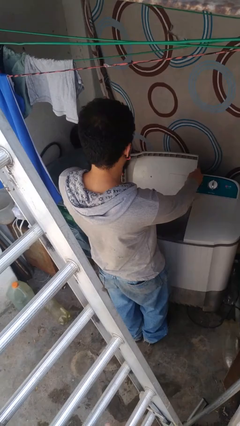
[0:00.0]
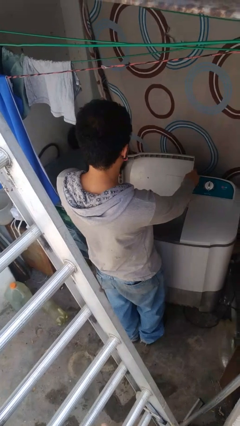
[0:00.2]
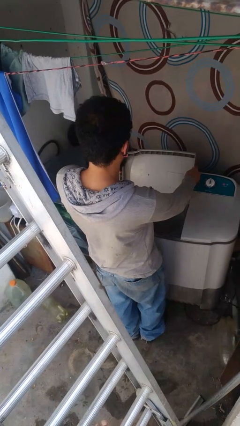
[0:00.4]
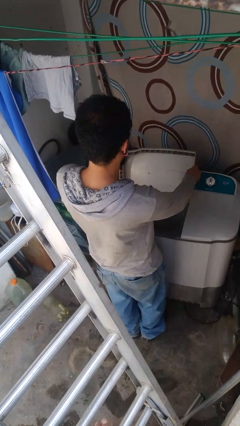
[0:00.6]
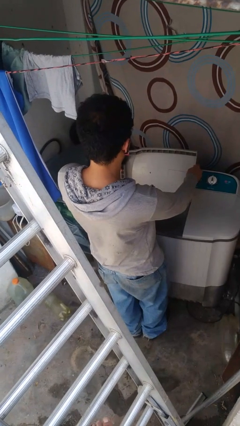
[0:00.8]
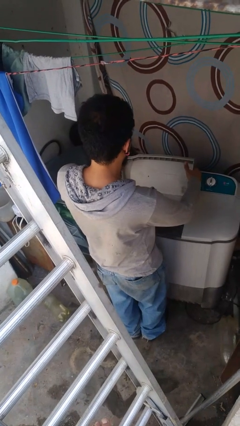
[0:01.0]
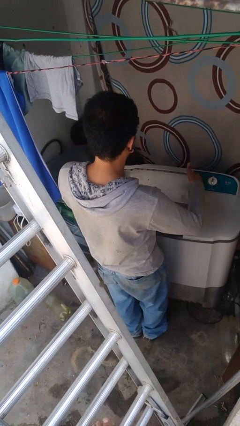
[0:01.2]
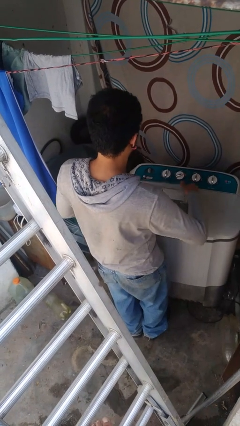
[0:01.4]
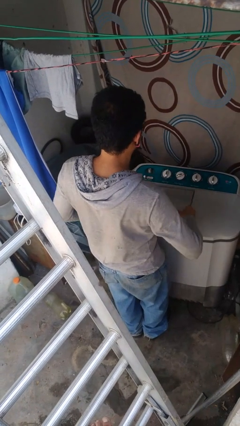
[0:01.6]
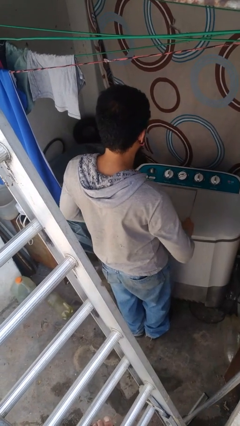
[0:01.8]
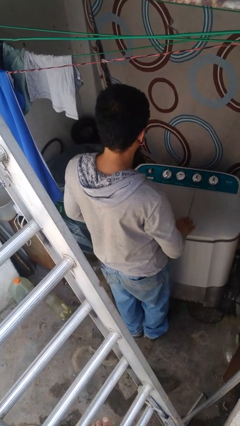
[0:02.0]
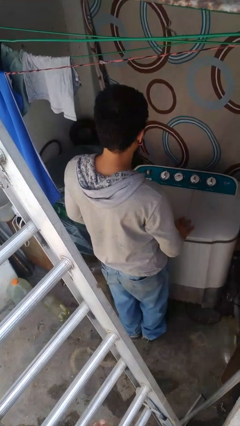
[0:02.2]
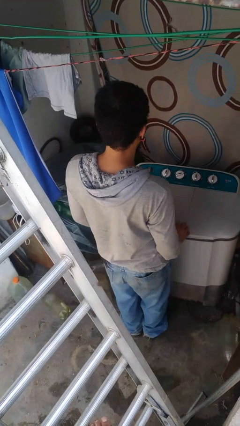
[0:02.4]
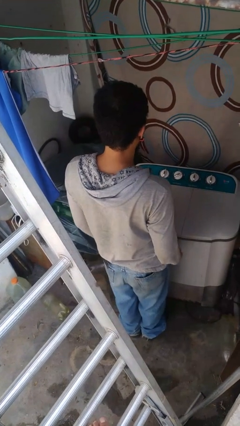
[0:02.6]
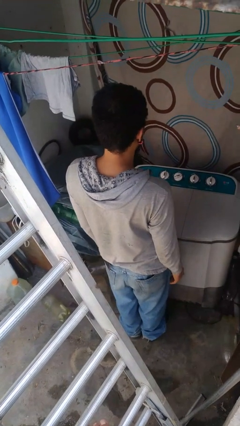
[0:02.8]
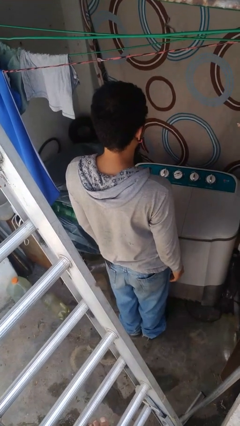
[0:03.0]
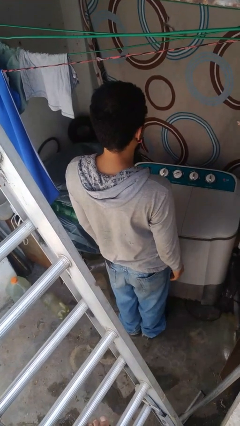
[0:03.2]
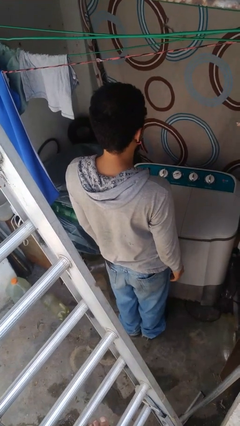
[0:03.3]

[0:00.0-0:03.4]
person closes clothes washer

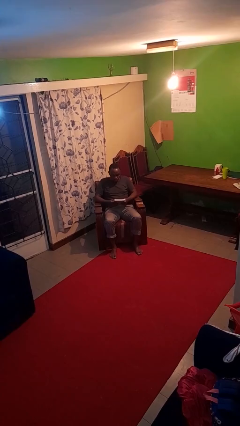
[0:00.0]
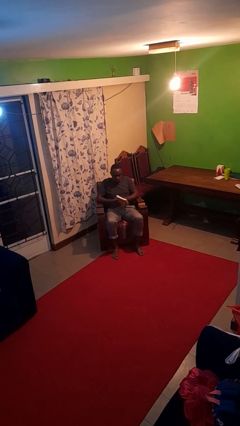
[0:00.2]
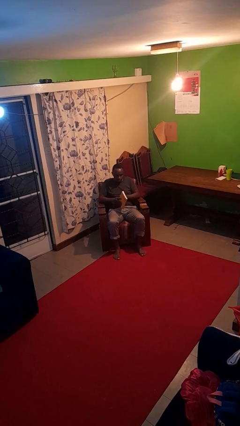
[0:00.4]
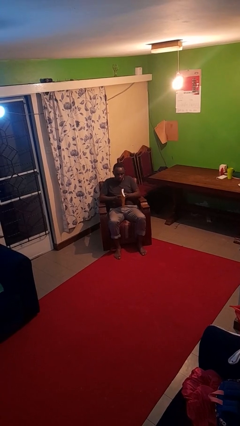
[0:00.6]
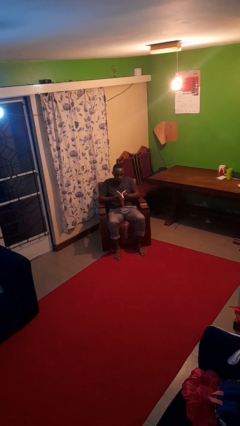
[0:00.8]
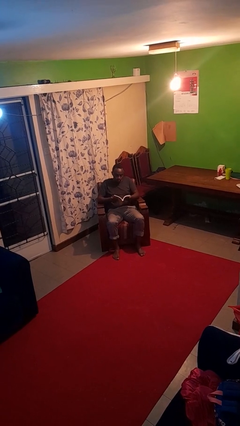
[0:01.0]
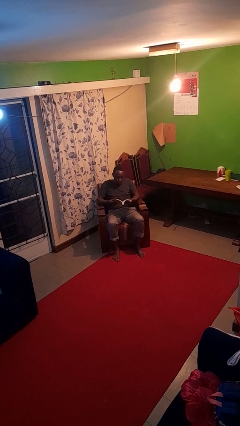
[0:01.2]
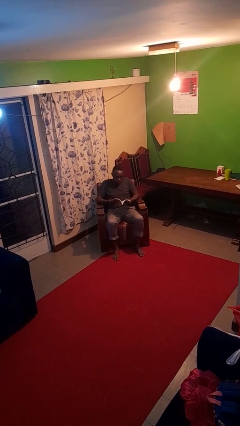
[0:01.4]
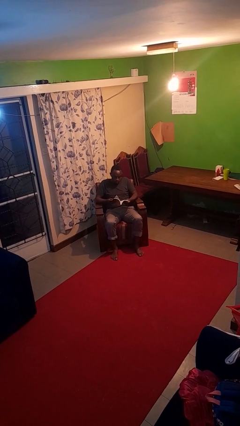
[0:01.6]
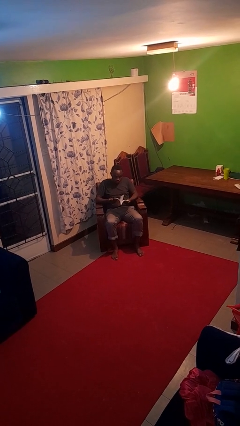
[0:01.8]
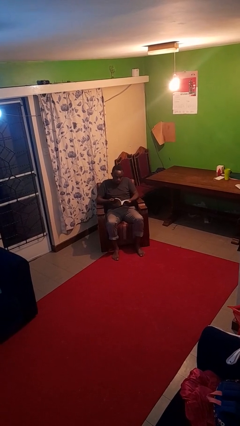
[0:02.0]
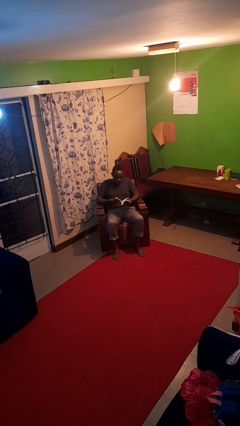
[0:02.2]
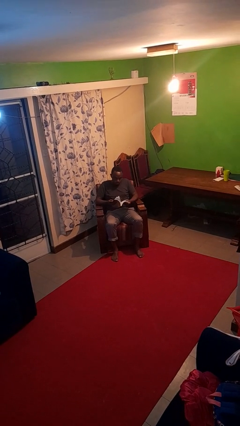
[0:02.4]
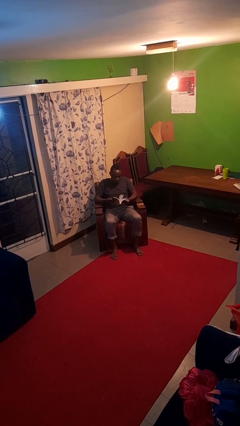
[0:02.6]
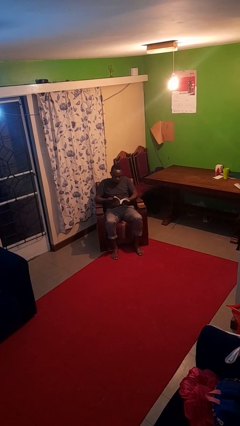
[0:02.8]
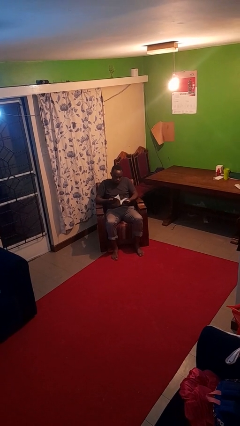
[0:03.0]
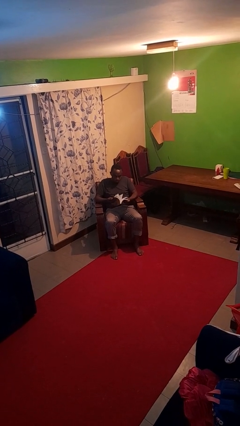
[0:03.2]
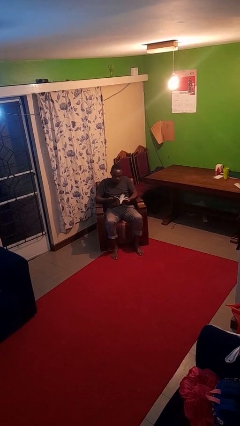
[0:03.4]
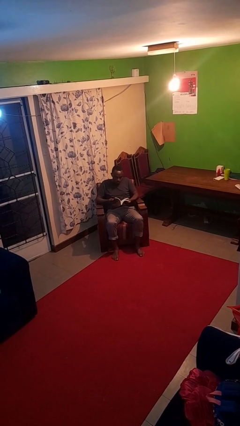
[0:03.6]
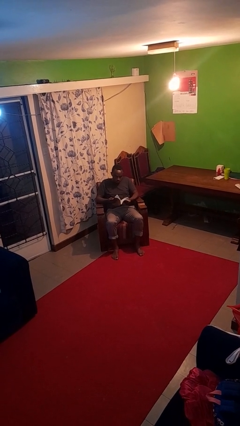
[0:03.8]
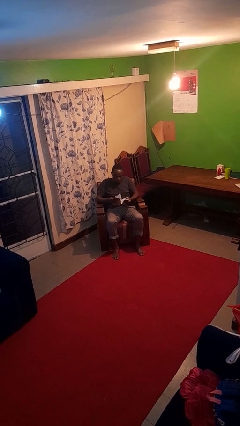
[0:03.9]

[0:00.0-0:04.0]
person reads book

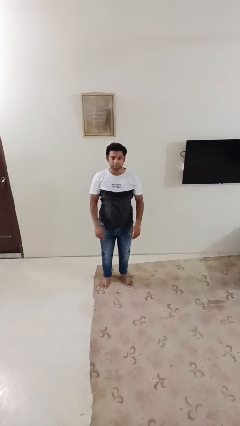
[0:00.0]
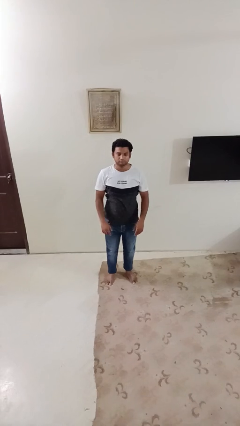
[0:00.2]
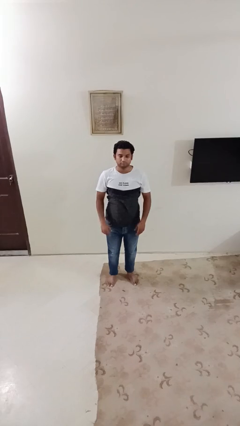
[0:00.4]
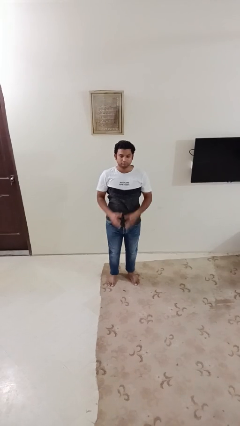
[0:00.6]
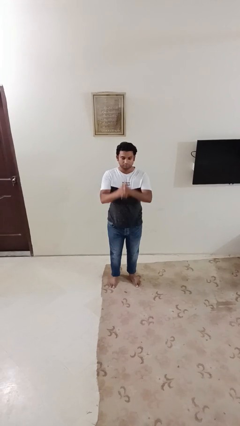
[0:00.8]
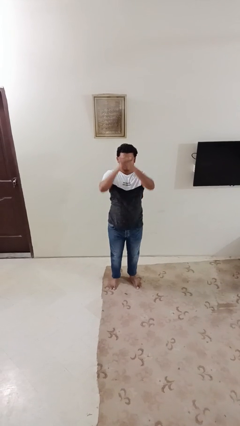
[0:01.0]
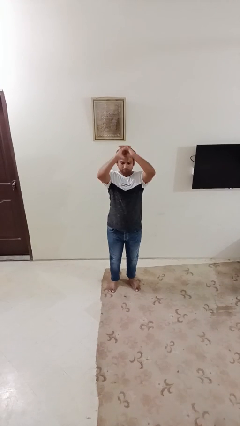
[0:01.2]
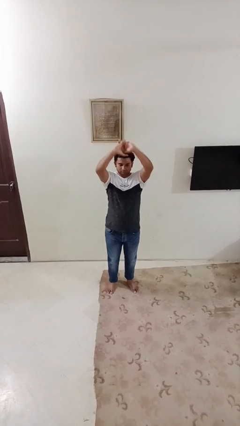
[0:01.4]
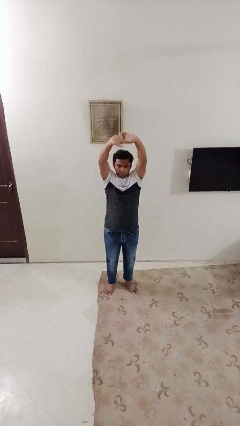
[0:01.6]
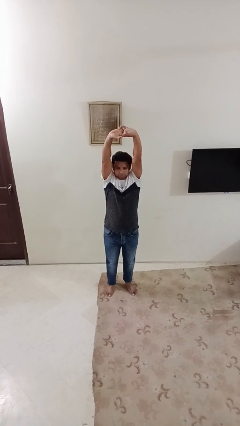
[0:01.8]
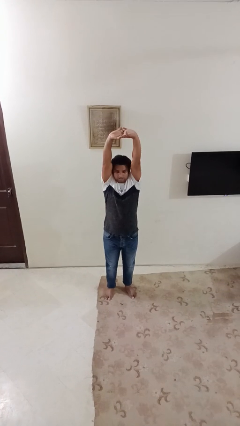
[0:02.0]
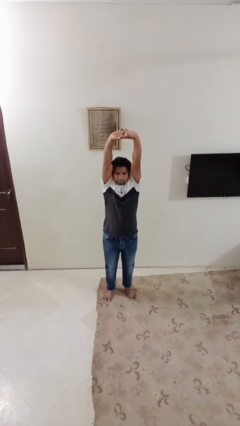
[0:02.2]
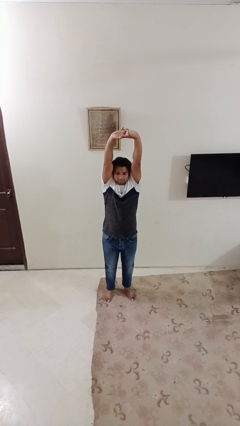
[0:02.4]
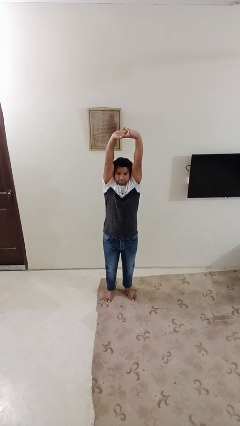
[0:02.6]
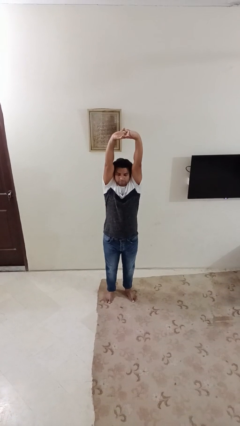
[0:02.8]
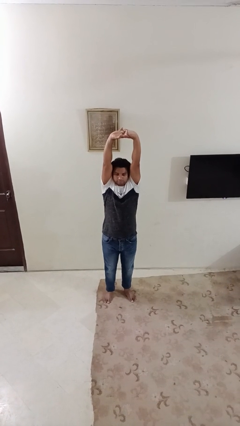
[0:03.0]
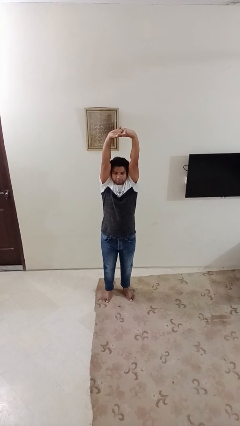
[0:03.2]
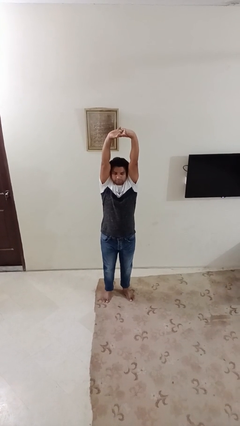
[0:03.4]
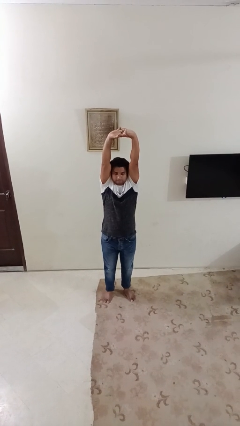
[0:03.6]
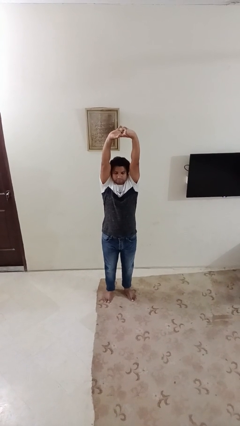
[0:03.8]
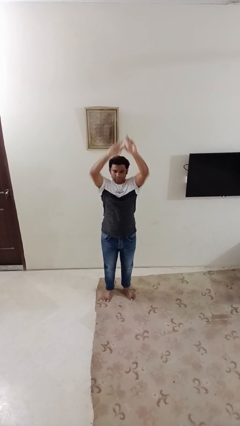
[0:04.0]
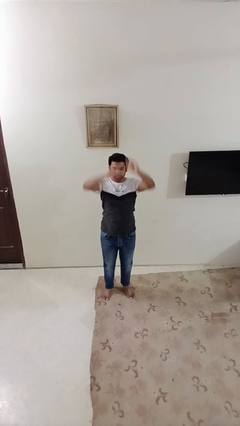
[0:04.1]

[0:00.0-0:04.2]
person stretches arms over head

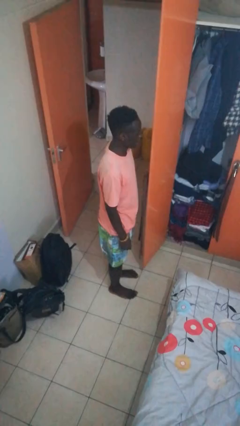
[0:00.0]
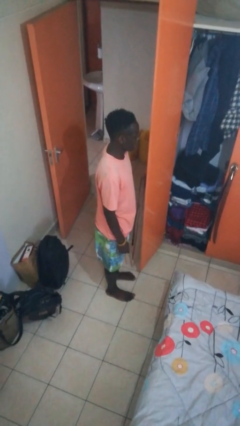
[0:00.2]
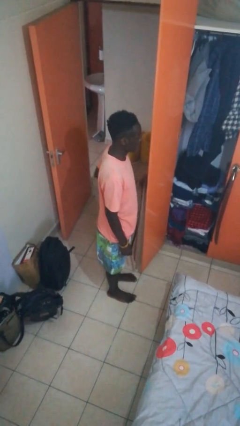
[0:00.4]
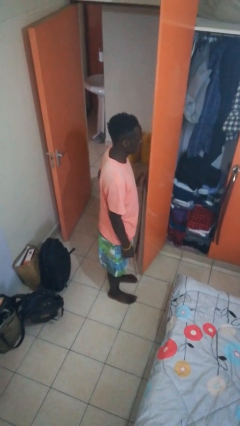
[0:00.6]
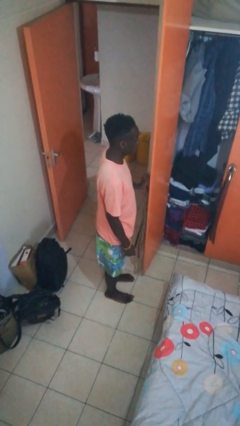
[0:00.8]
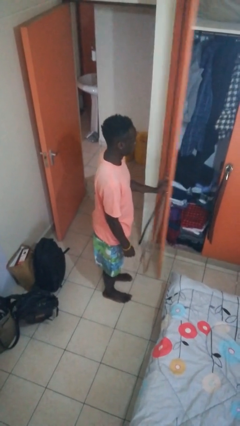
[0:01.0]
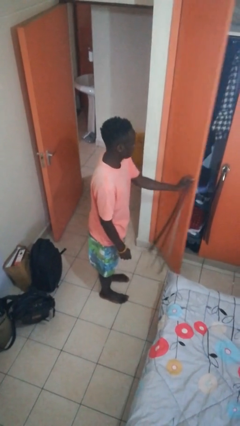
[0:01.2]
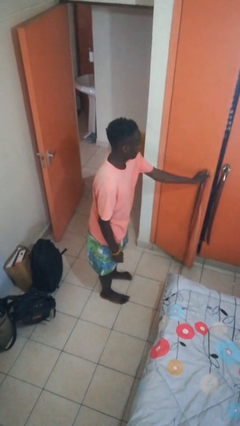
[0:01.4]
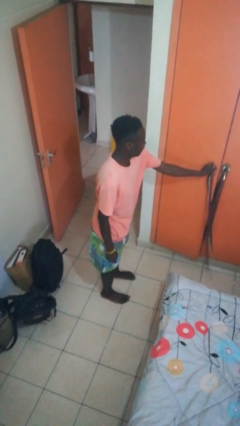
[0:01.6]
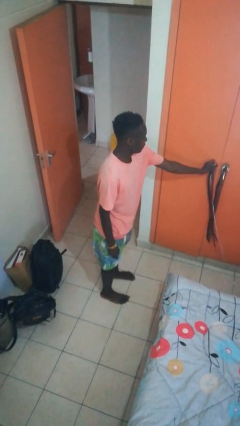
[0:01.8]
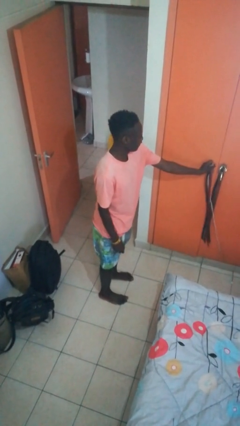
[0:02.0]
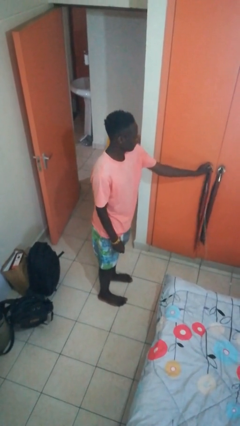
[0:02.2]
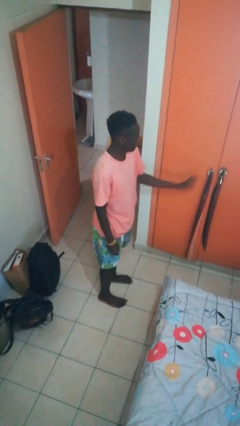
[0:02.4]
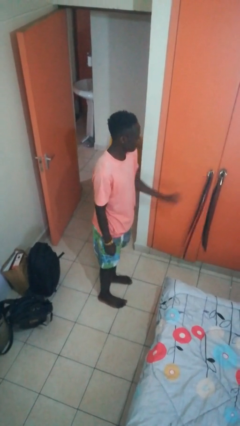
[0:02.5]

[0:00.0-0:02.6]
person closes closet door

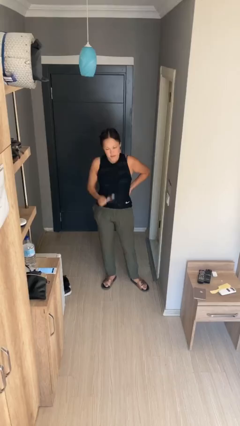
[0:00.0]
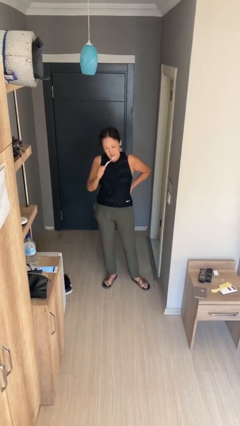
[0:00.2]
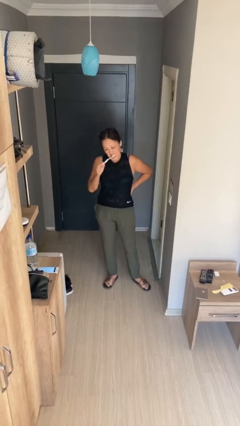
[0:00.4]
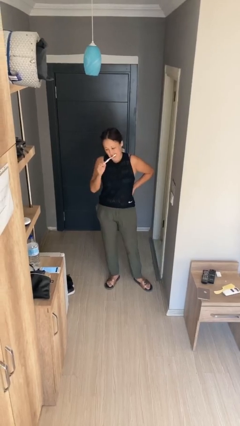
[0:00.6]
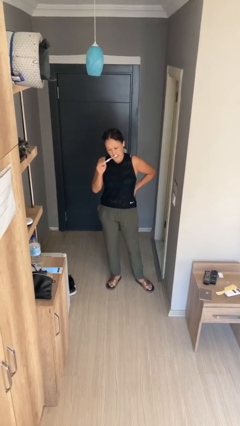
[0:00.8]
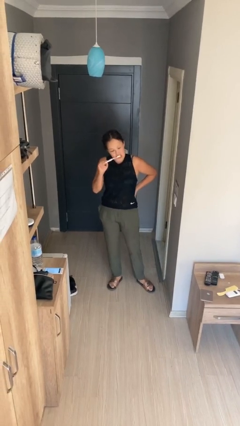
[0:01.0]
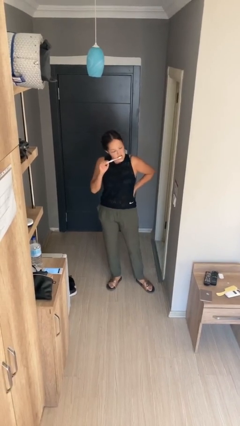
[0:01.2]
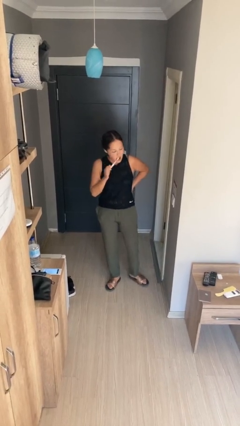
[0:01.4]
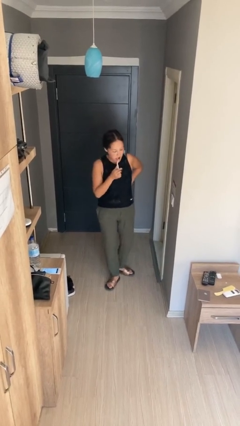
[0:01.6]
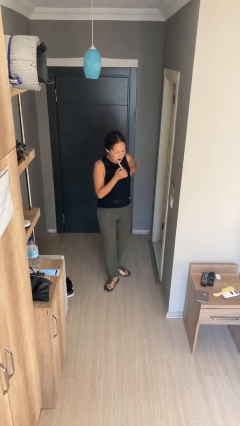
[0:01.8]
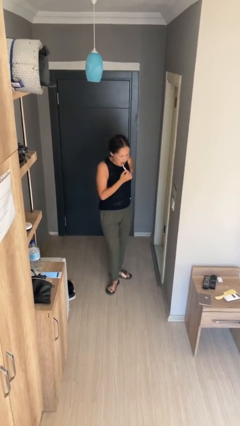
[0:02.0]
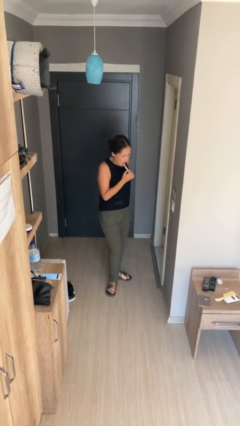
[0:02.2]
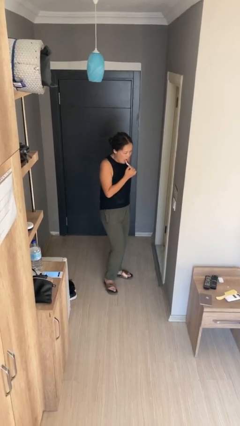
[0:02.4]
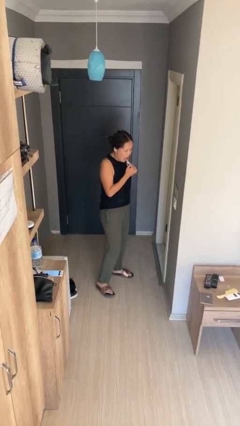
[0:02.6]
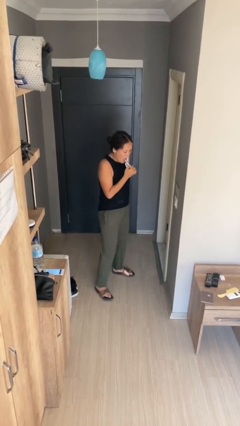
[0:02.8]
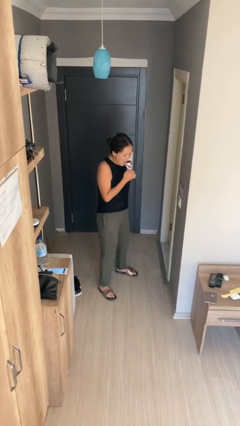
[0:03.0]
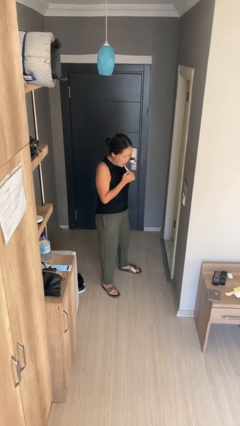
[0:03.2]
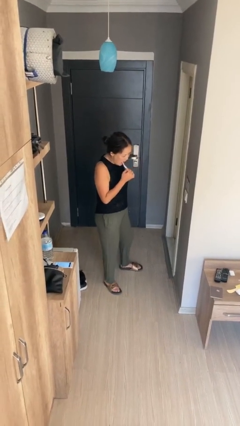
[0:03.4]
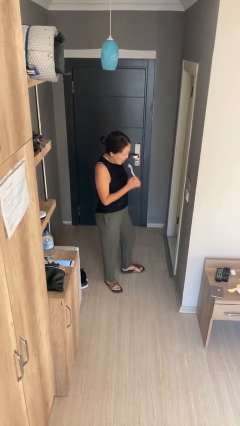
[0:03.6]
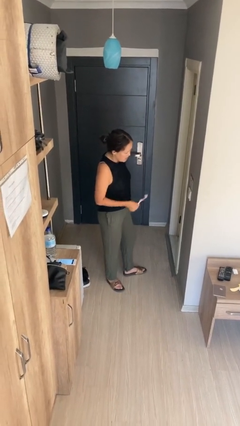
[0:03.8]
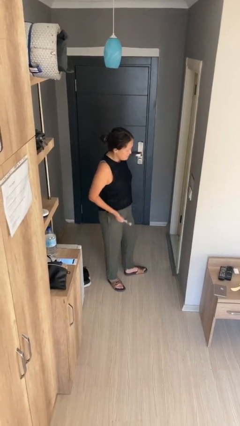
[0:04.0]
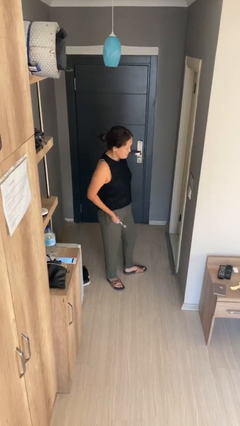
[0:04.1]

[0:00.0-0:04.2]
person brushes teeth
